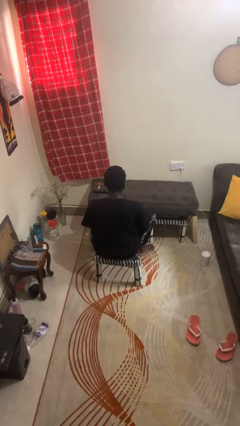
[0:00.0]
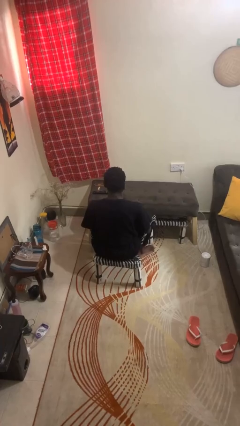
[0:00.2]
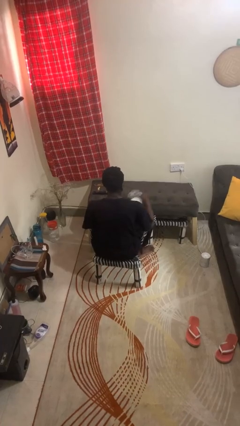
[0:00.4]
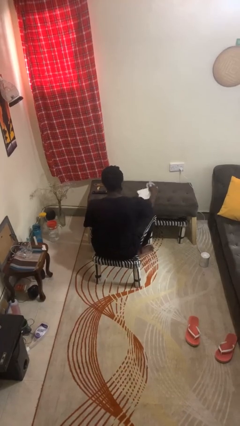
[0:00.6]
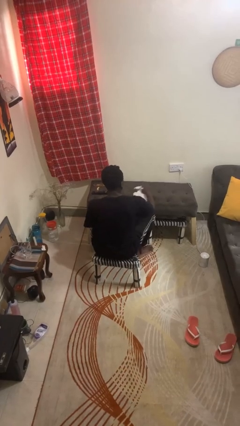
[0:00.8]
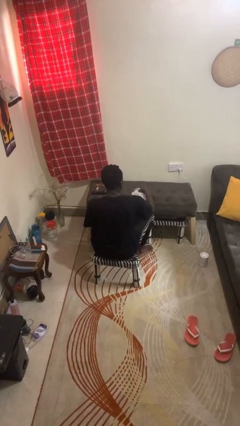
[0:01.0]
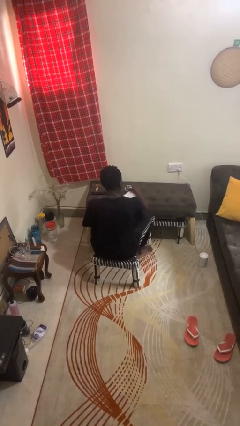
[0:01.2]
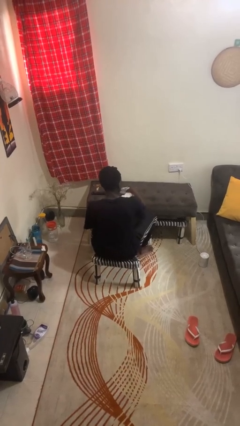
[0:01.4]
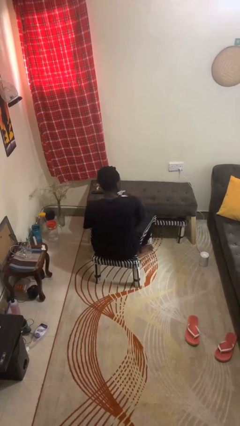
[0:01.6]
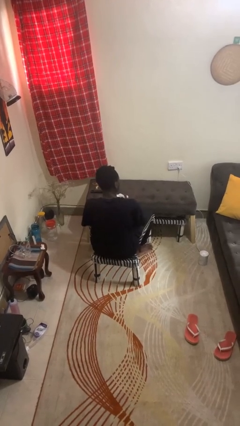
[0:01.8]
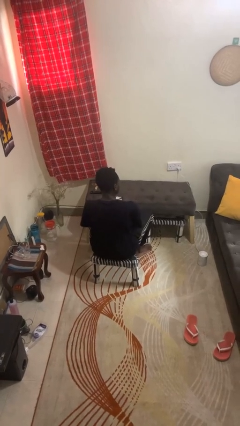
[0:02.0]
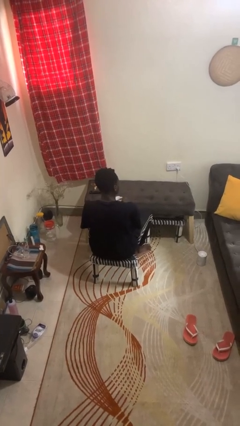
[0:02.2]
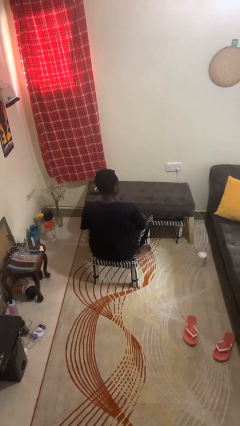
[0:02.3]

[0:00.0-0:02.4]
person cleans table with rag

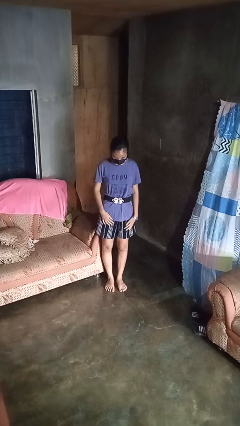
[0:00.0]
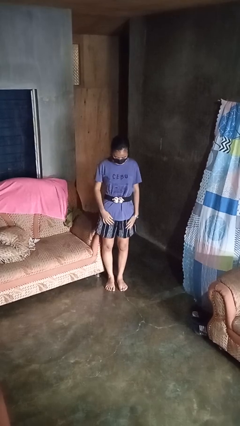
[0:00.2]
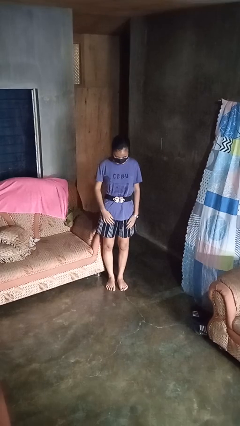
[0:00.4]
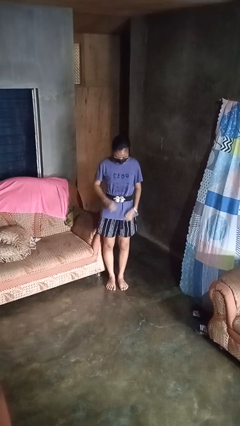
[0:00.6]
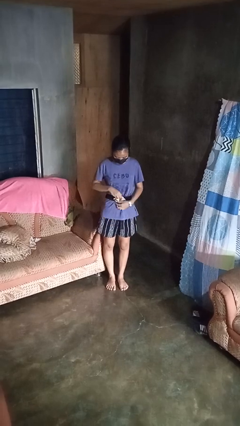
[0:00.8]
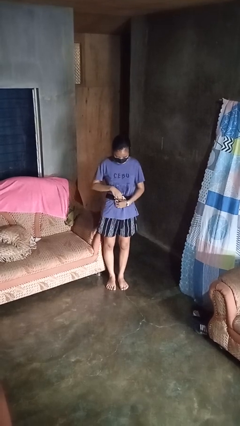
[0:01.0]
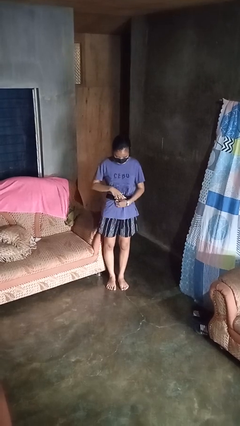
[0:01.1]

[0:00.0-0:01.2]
person takes off belt

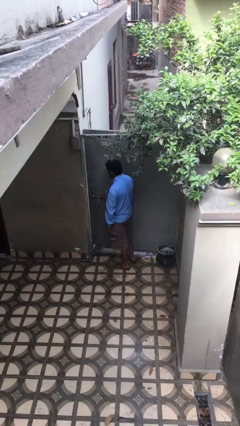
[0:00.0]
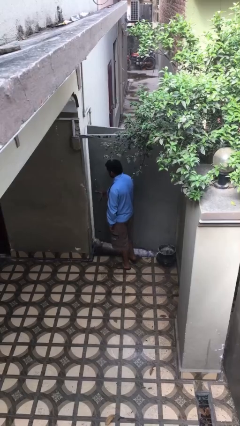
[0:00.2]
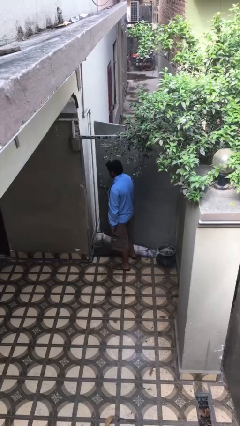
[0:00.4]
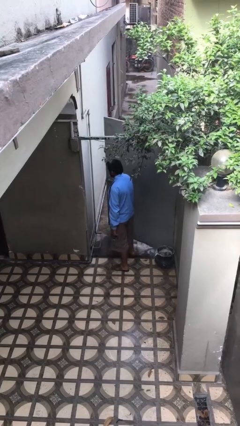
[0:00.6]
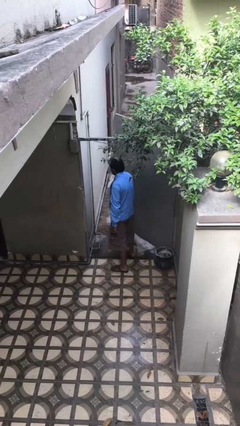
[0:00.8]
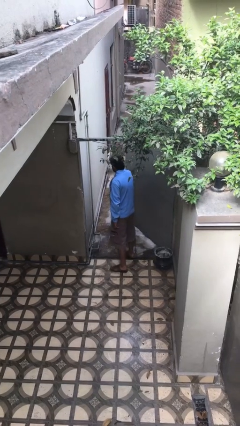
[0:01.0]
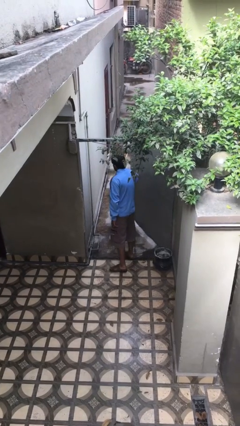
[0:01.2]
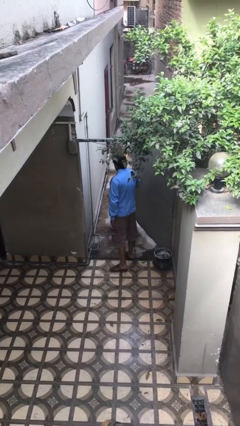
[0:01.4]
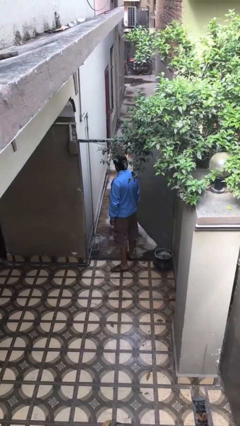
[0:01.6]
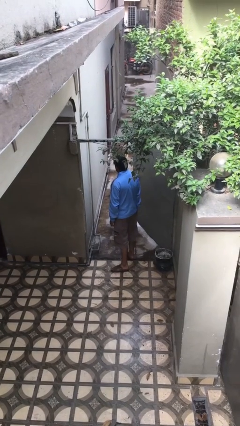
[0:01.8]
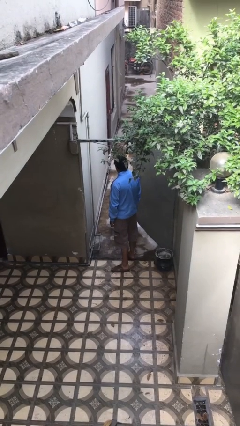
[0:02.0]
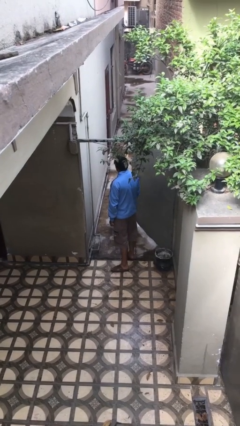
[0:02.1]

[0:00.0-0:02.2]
person opens facility door

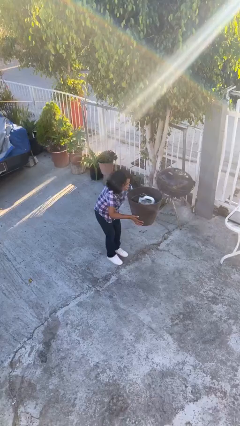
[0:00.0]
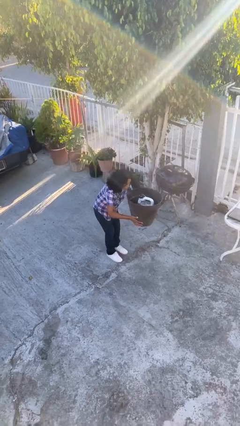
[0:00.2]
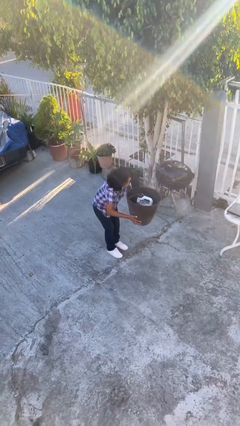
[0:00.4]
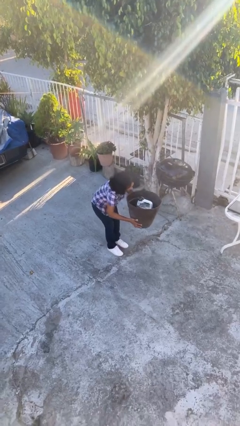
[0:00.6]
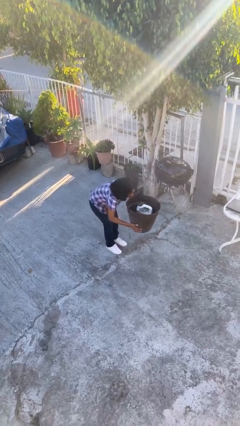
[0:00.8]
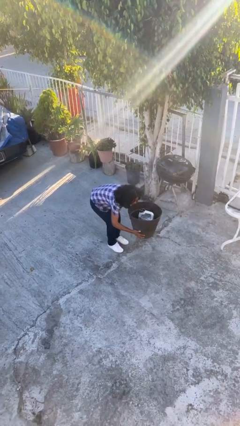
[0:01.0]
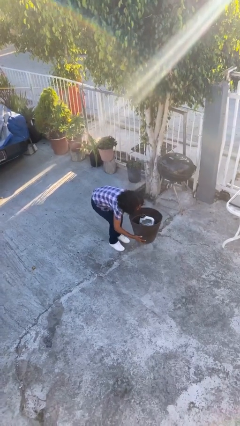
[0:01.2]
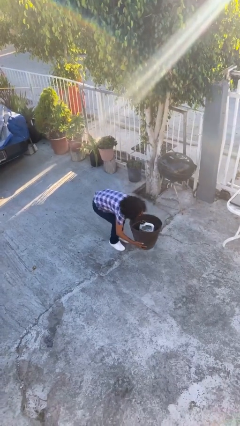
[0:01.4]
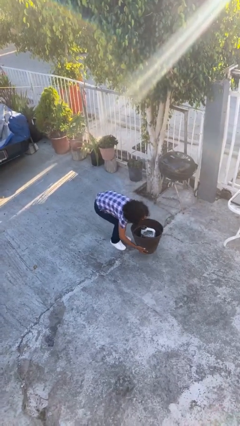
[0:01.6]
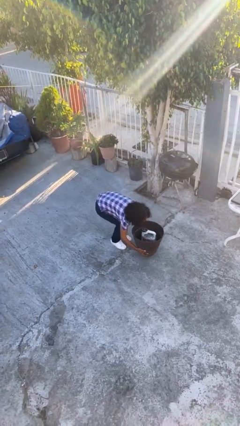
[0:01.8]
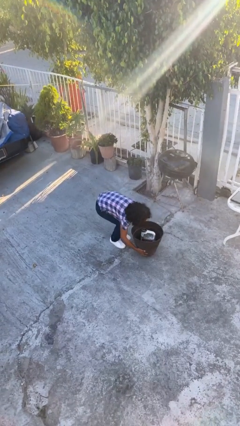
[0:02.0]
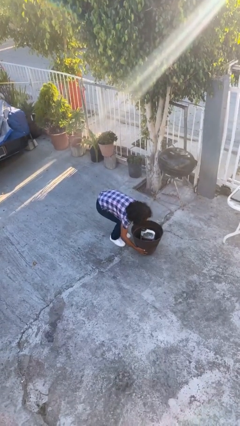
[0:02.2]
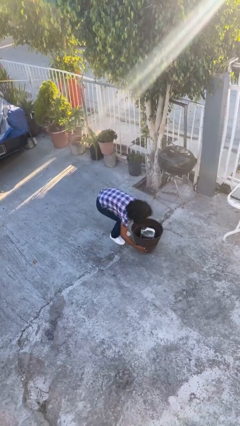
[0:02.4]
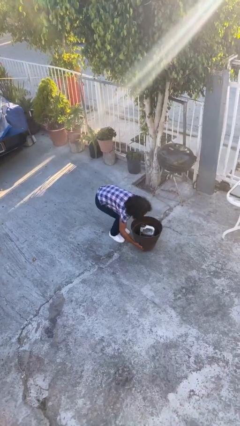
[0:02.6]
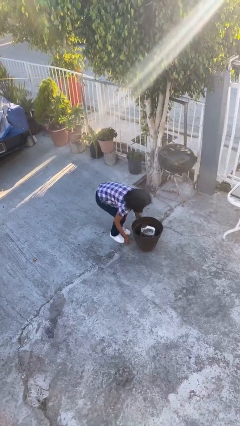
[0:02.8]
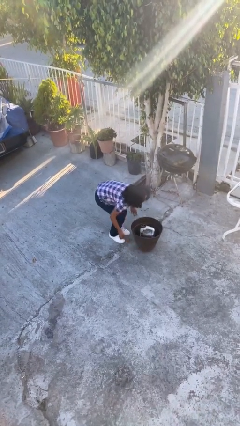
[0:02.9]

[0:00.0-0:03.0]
person puts down object on floor

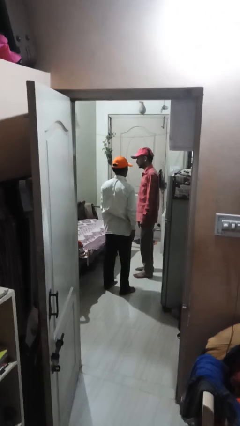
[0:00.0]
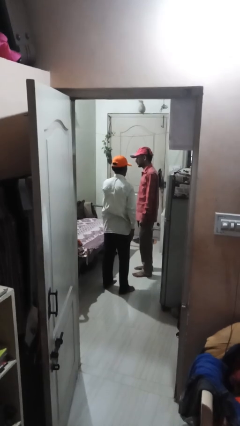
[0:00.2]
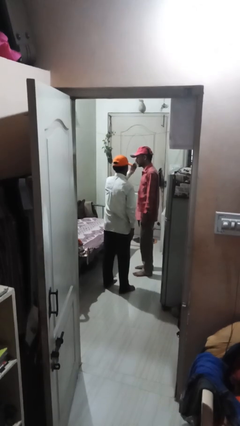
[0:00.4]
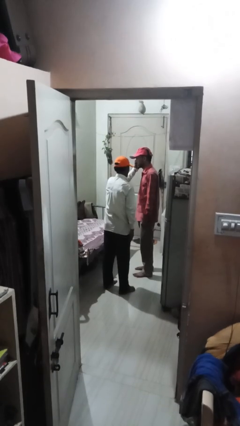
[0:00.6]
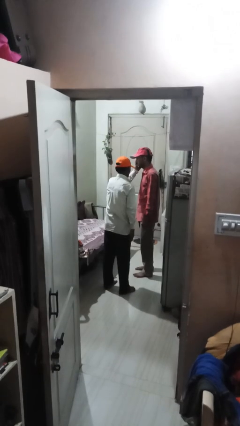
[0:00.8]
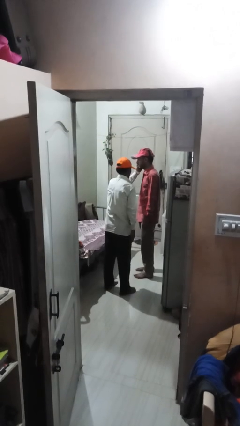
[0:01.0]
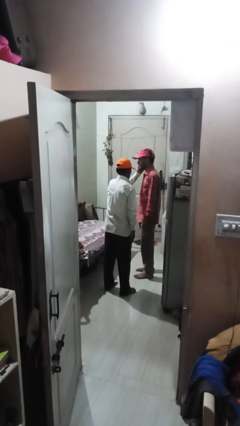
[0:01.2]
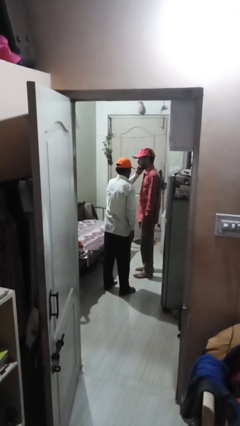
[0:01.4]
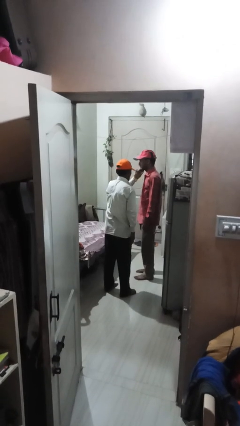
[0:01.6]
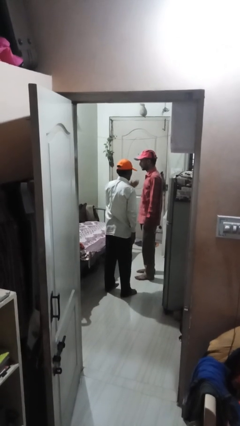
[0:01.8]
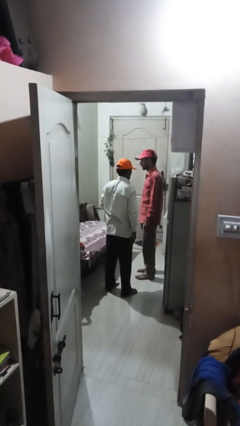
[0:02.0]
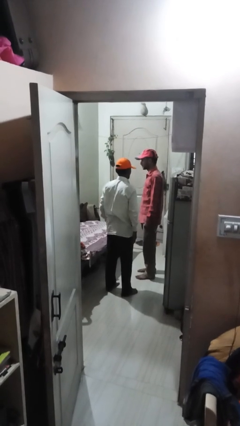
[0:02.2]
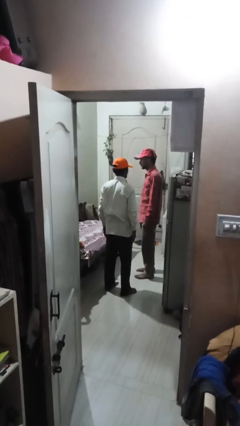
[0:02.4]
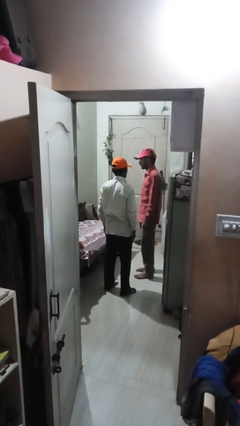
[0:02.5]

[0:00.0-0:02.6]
person touches face of person

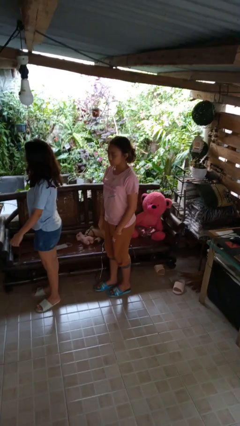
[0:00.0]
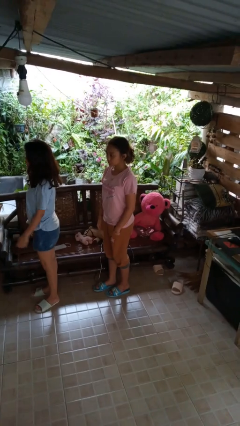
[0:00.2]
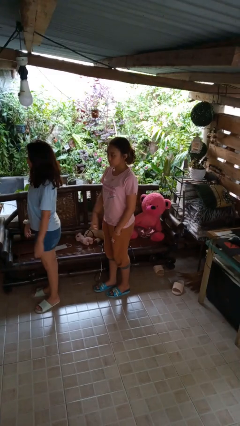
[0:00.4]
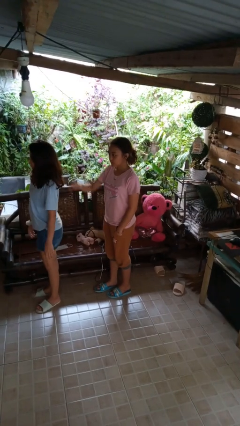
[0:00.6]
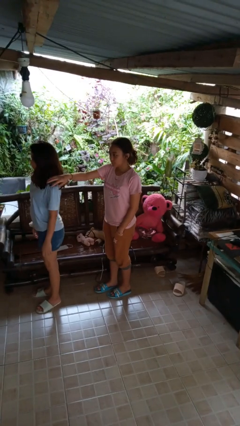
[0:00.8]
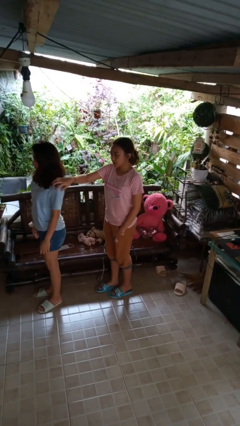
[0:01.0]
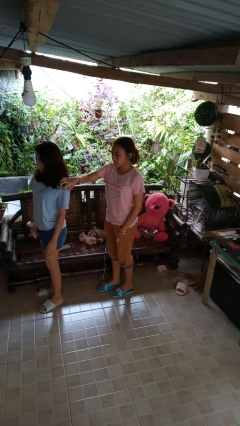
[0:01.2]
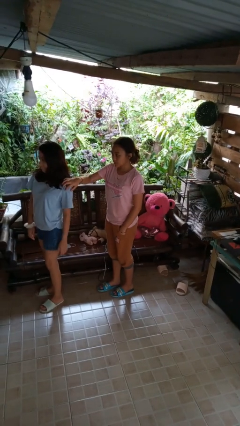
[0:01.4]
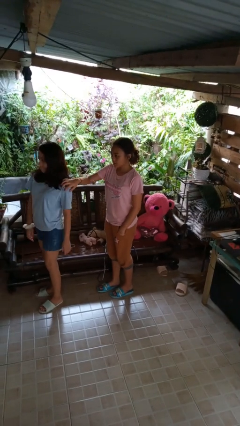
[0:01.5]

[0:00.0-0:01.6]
person grabs person by shoulder

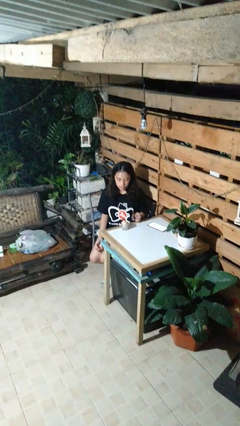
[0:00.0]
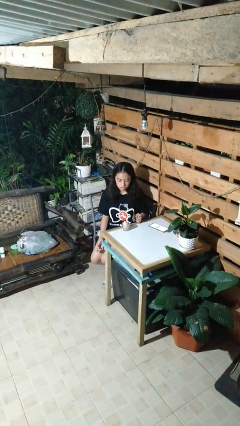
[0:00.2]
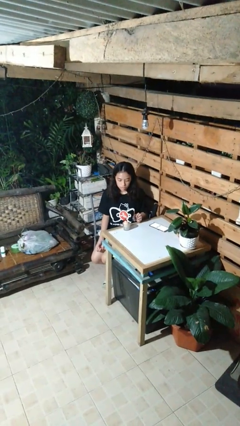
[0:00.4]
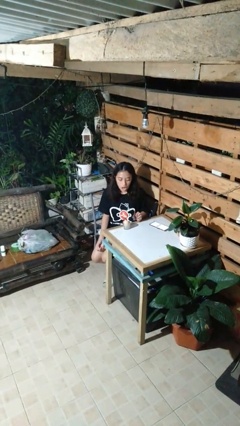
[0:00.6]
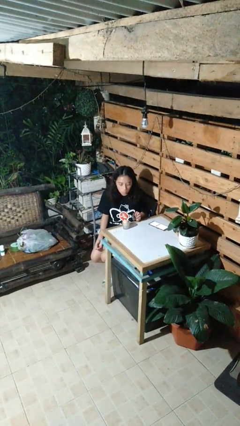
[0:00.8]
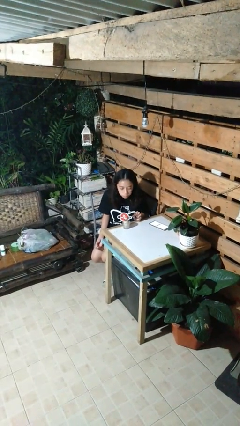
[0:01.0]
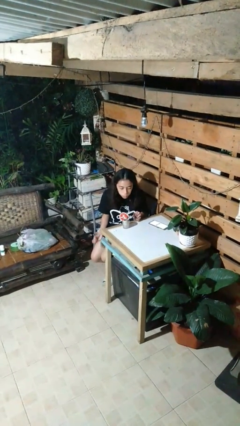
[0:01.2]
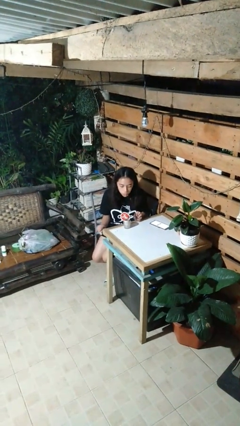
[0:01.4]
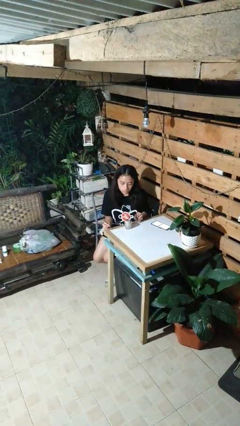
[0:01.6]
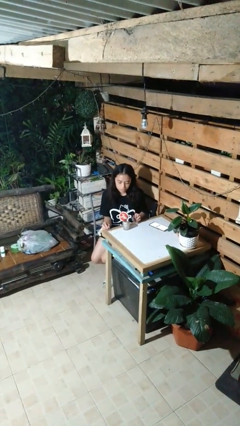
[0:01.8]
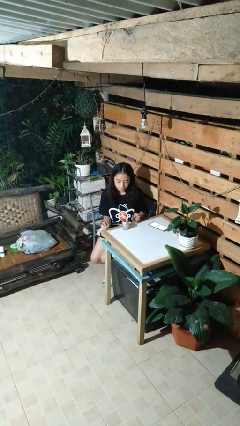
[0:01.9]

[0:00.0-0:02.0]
person extinguishes candle

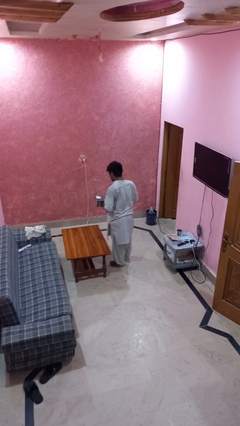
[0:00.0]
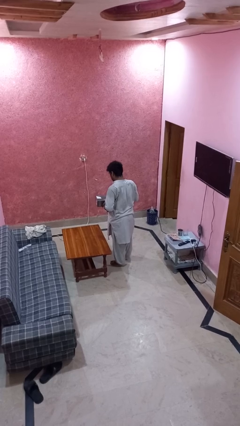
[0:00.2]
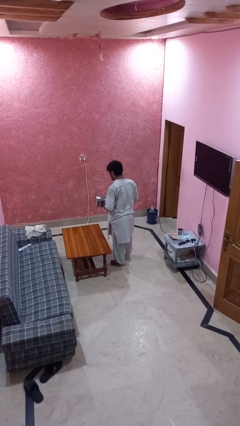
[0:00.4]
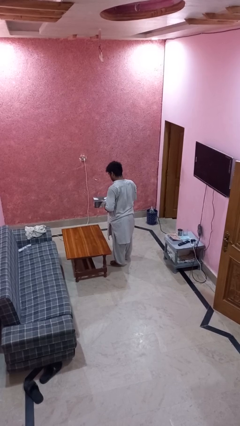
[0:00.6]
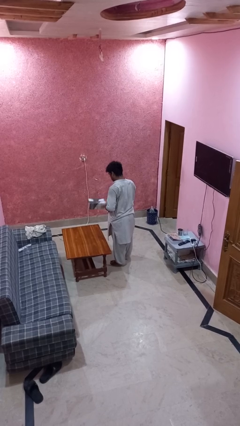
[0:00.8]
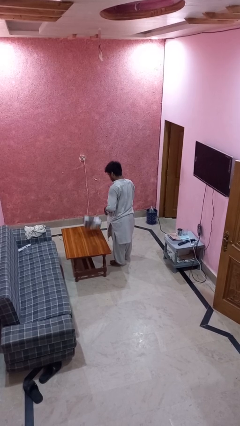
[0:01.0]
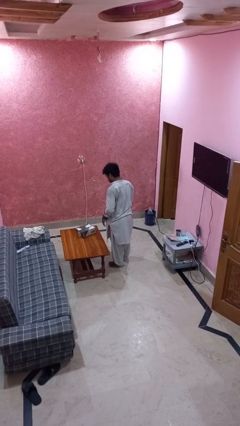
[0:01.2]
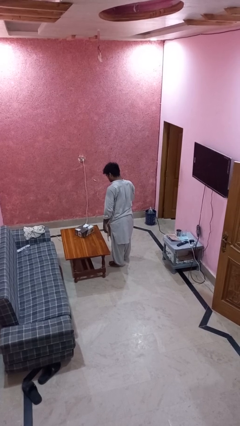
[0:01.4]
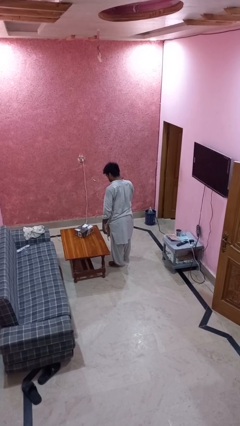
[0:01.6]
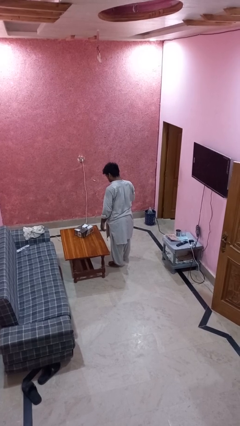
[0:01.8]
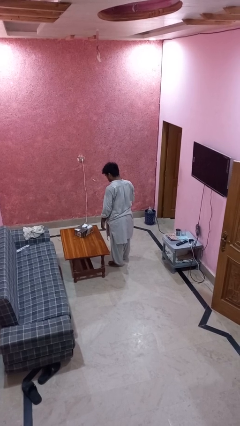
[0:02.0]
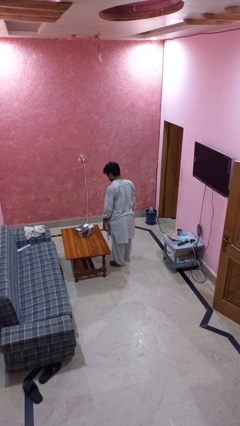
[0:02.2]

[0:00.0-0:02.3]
person throws object on table

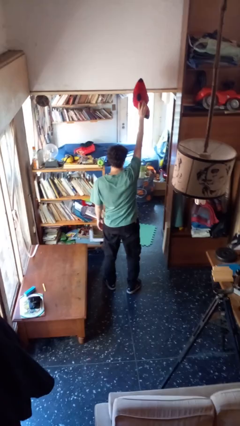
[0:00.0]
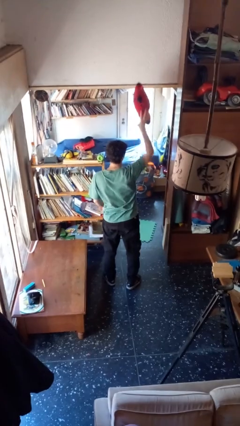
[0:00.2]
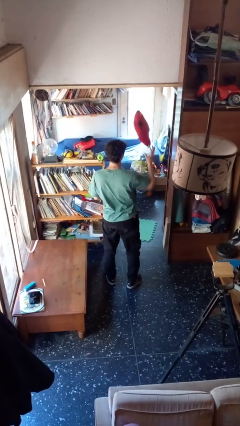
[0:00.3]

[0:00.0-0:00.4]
person drops object
